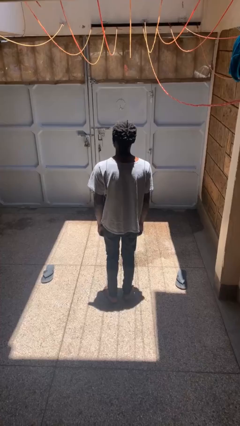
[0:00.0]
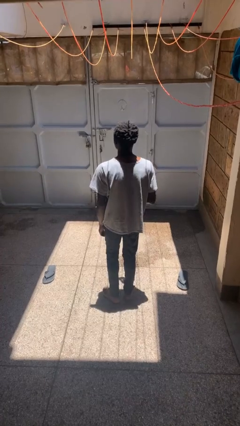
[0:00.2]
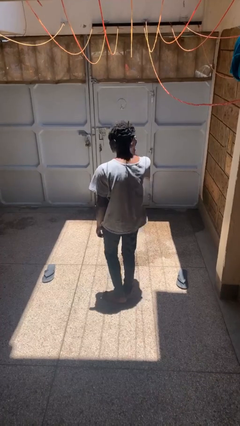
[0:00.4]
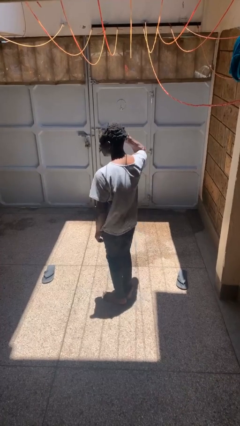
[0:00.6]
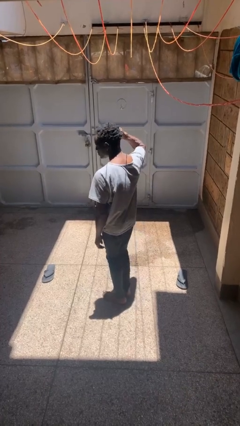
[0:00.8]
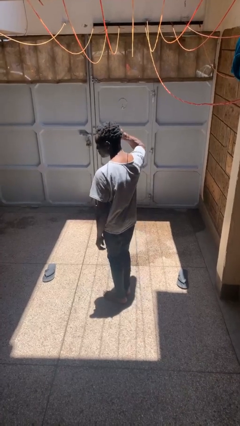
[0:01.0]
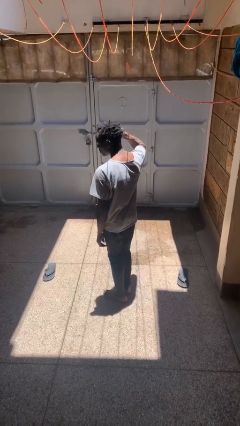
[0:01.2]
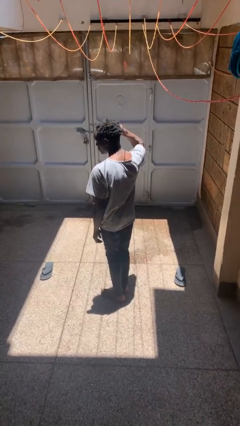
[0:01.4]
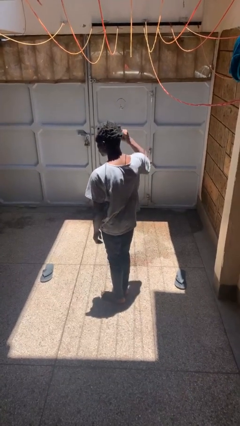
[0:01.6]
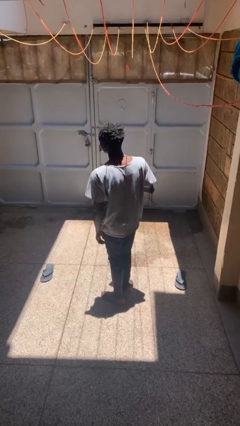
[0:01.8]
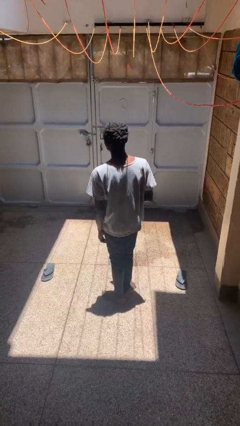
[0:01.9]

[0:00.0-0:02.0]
person touches earlobe

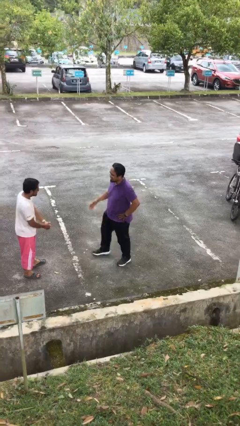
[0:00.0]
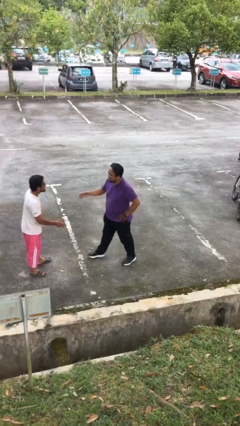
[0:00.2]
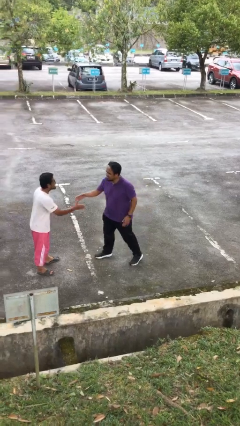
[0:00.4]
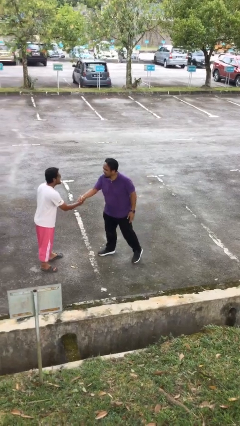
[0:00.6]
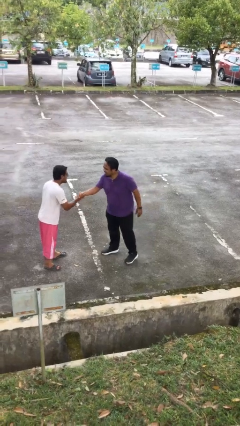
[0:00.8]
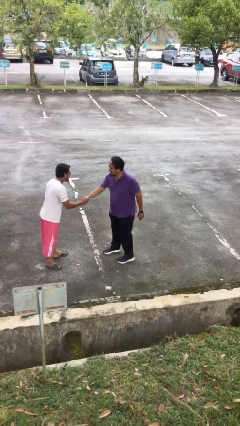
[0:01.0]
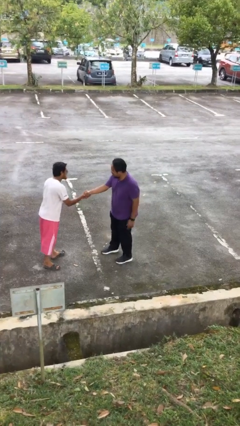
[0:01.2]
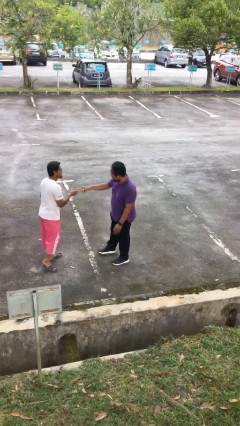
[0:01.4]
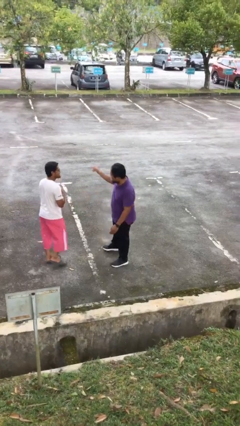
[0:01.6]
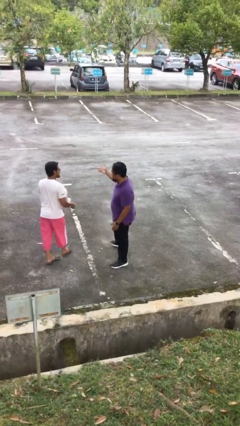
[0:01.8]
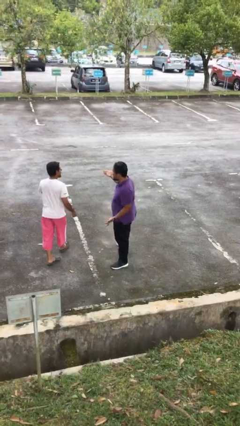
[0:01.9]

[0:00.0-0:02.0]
person shakes hand

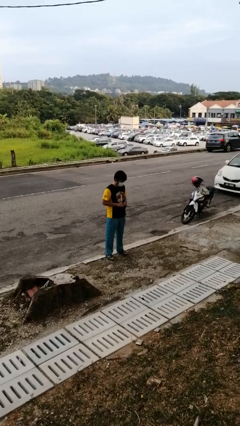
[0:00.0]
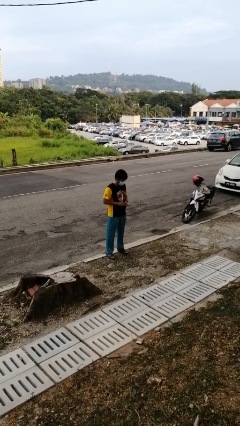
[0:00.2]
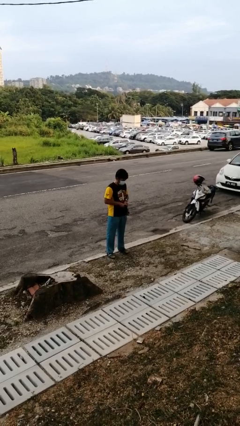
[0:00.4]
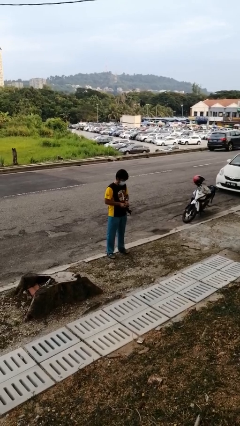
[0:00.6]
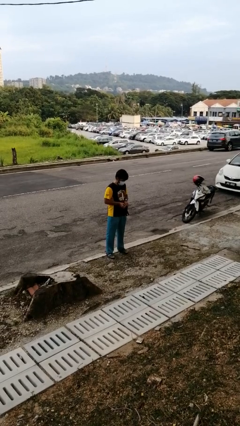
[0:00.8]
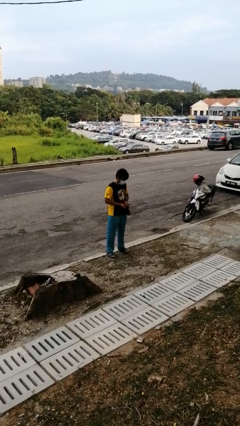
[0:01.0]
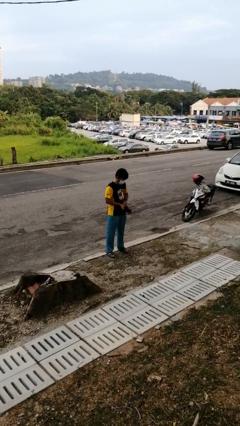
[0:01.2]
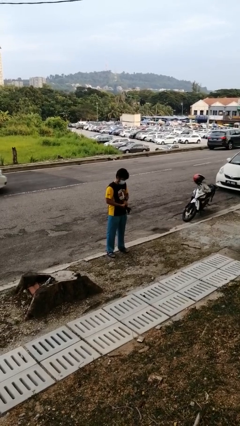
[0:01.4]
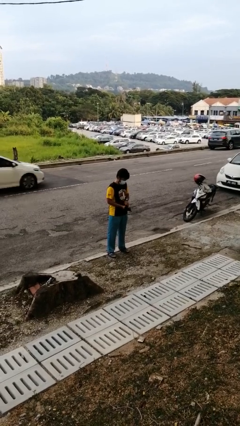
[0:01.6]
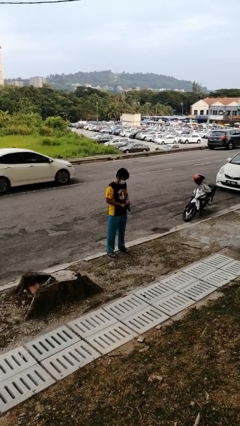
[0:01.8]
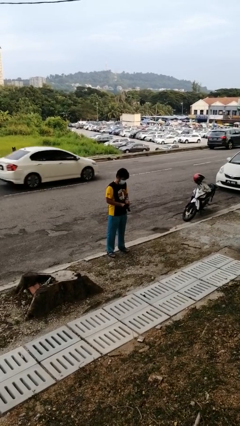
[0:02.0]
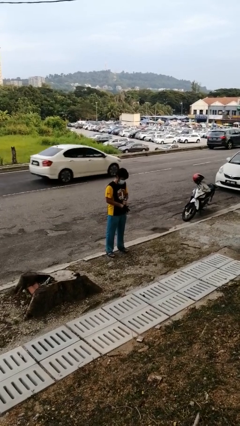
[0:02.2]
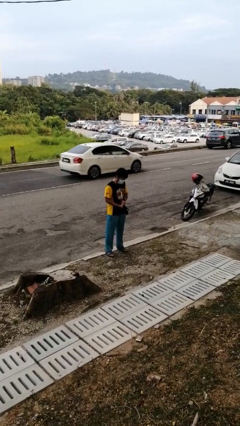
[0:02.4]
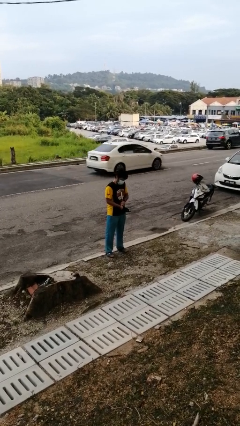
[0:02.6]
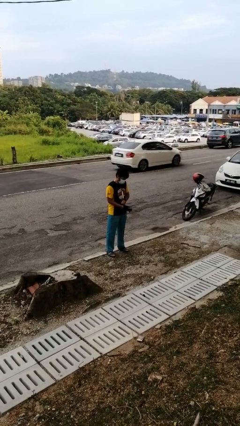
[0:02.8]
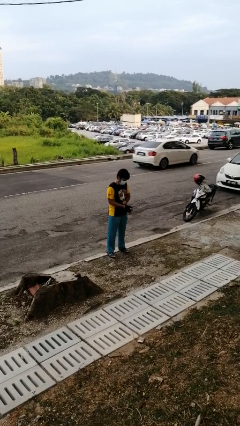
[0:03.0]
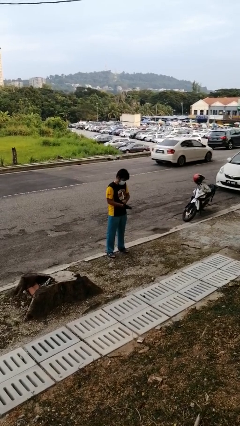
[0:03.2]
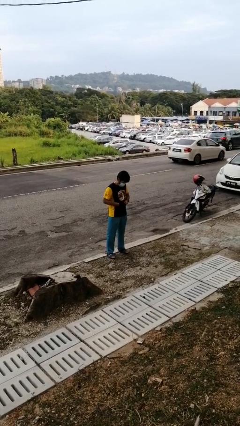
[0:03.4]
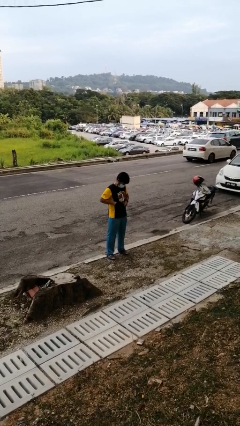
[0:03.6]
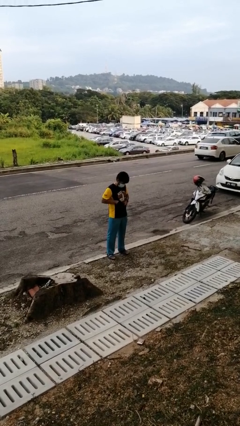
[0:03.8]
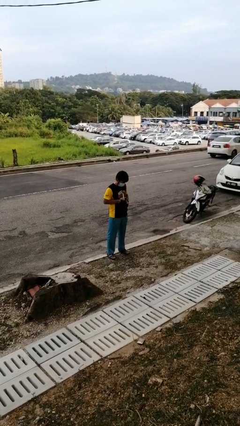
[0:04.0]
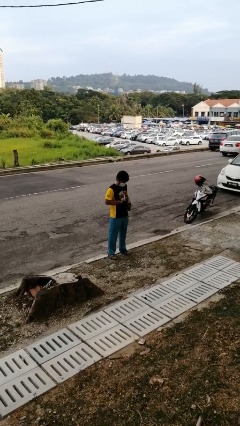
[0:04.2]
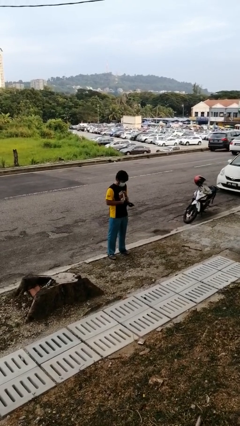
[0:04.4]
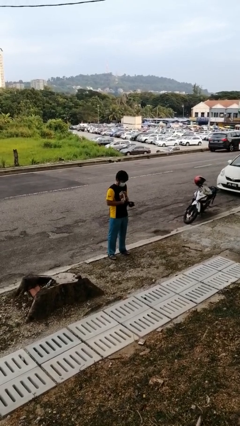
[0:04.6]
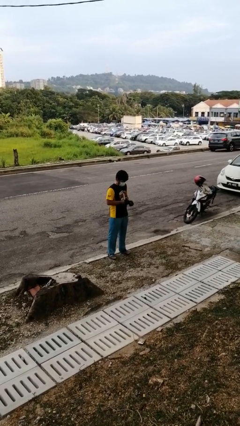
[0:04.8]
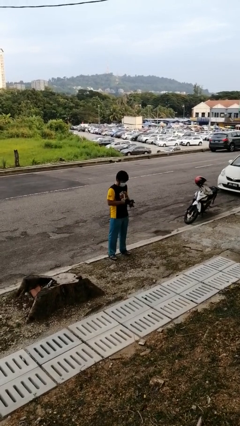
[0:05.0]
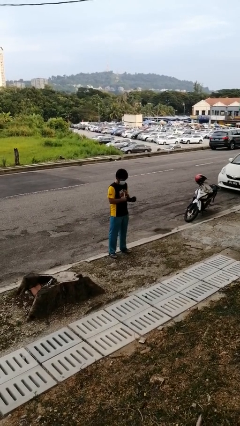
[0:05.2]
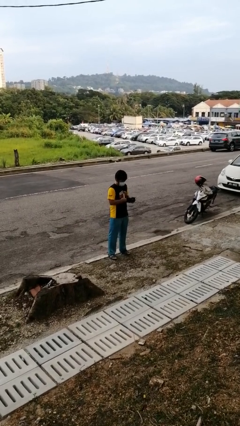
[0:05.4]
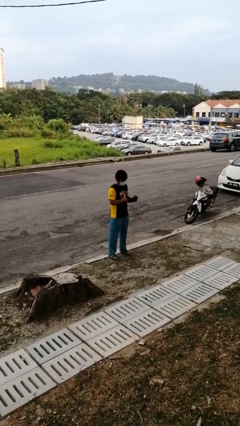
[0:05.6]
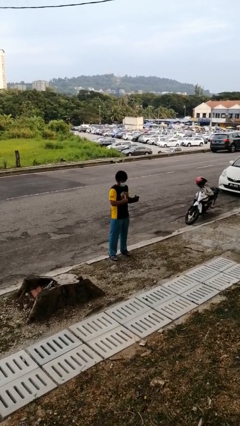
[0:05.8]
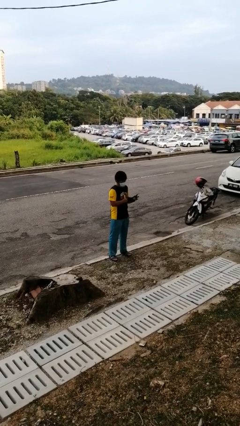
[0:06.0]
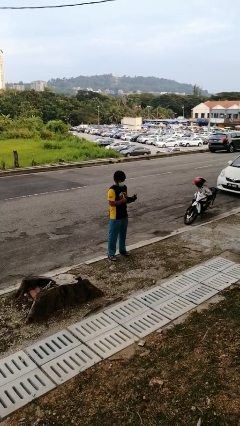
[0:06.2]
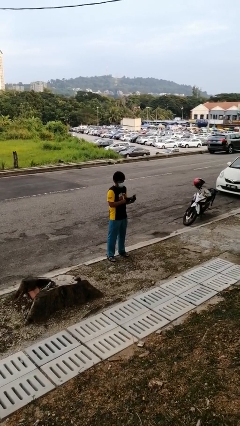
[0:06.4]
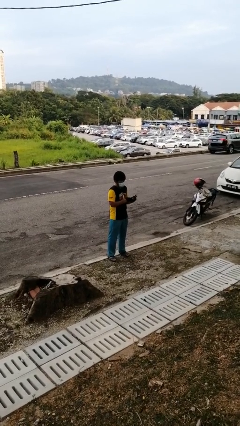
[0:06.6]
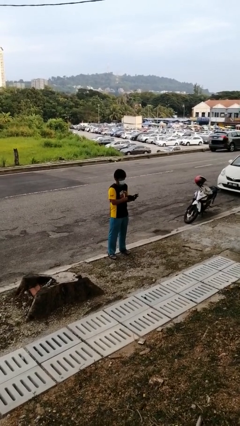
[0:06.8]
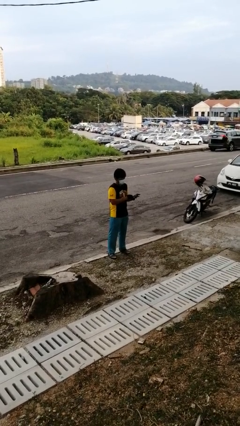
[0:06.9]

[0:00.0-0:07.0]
person puts on gloves

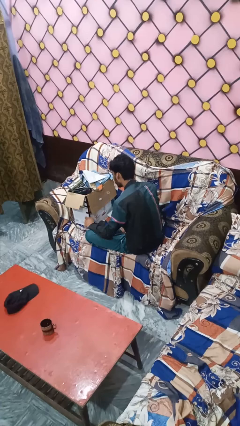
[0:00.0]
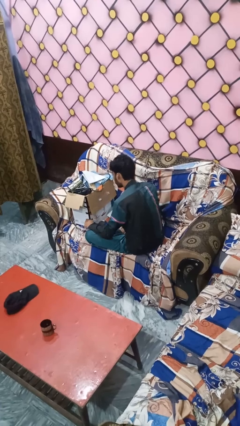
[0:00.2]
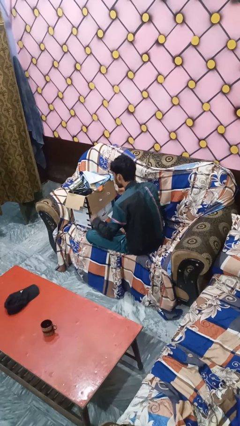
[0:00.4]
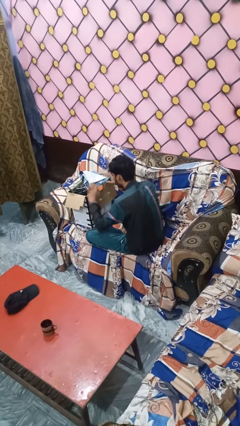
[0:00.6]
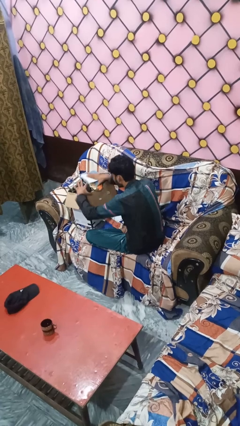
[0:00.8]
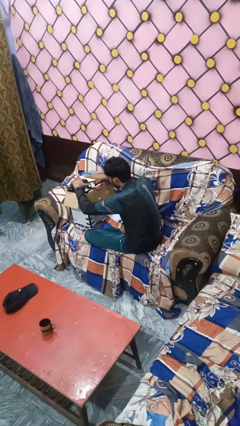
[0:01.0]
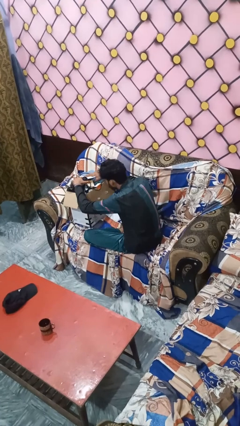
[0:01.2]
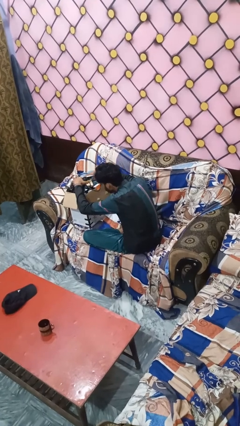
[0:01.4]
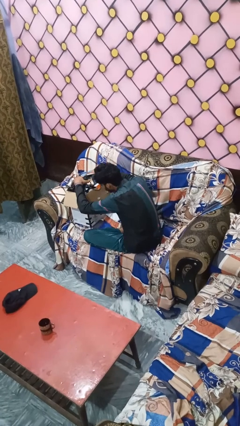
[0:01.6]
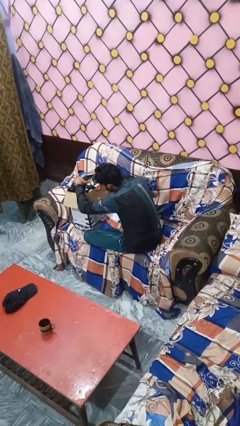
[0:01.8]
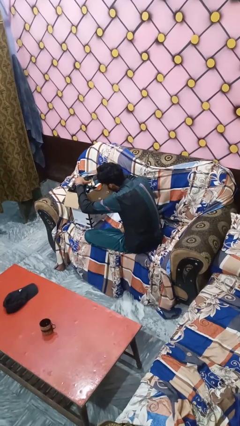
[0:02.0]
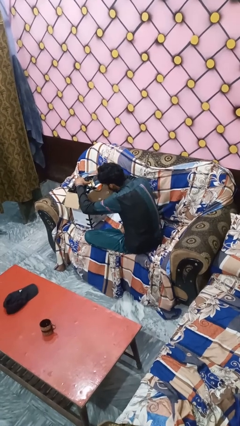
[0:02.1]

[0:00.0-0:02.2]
person searches in box

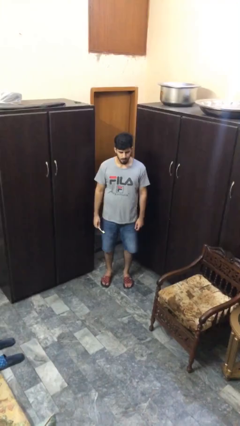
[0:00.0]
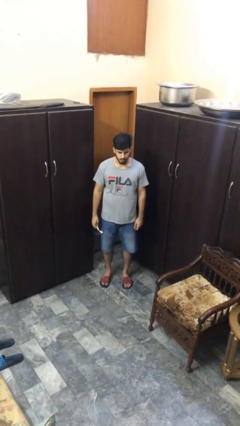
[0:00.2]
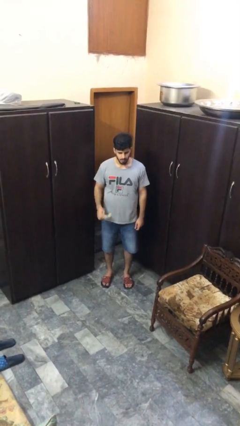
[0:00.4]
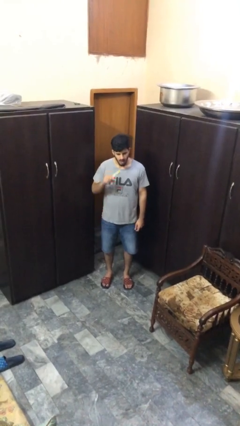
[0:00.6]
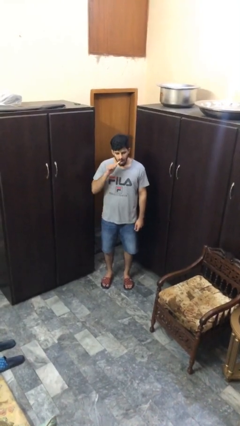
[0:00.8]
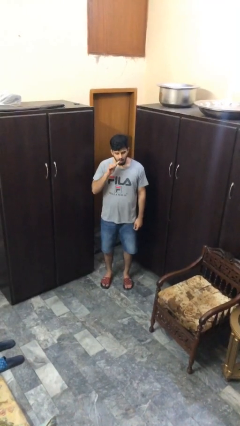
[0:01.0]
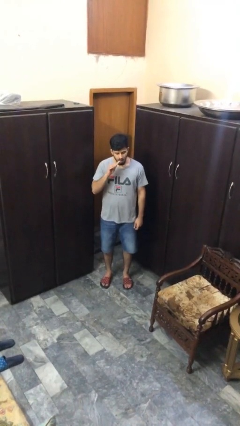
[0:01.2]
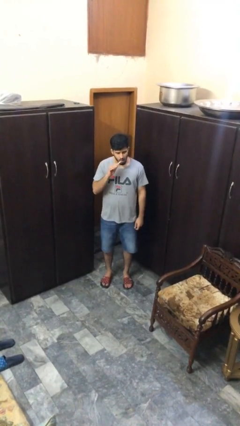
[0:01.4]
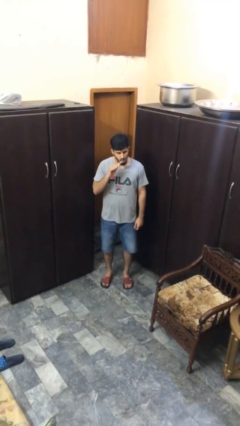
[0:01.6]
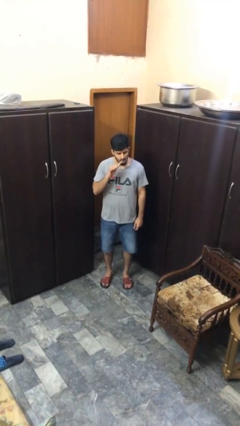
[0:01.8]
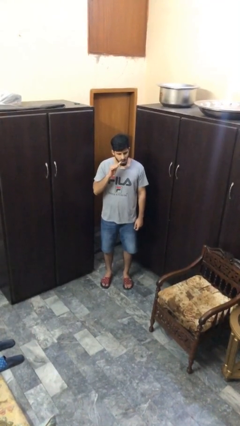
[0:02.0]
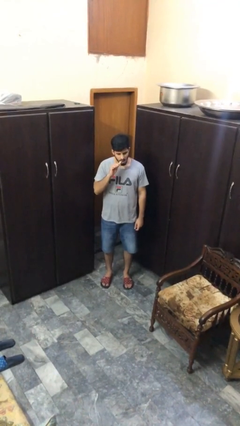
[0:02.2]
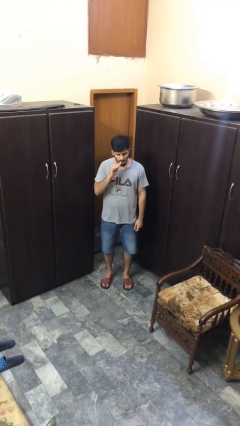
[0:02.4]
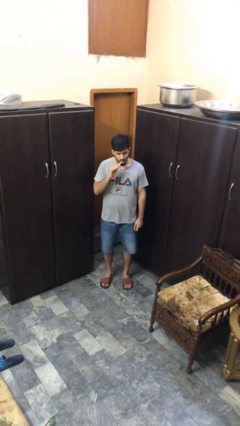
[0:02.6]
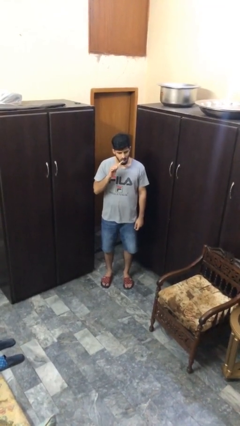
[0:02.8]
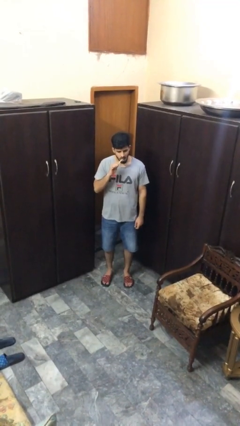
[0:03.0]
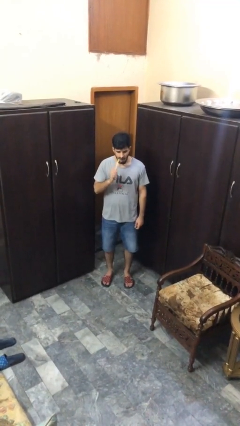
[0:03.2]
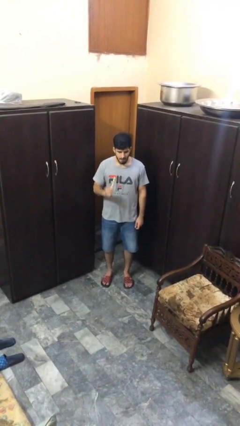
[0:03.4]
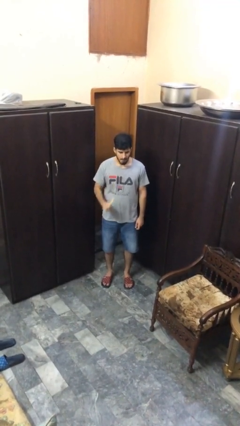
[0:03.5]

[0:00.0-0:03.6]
person brushes teeth

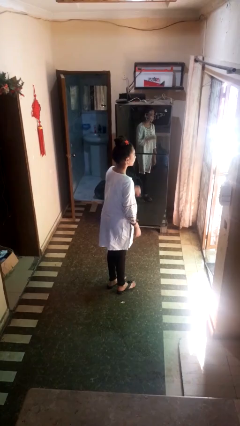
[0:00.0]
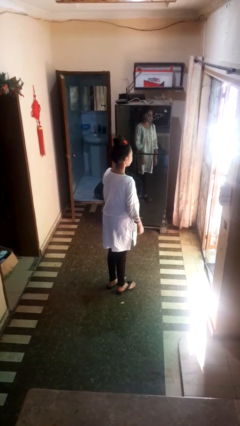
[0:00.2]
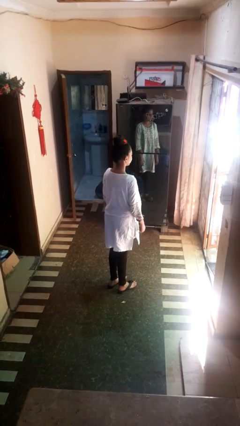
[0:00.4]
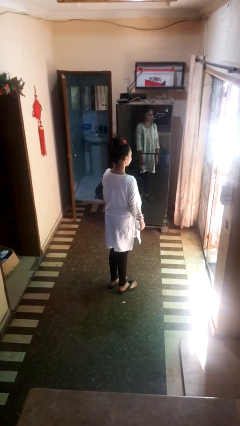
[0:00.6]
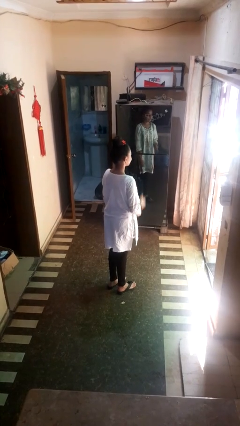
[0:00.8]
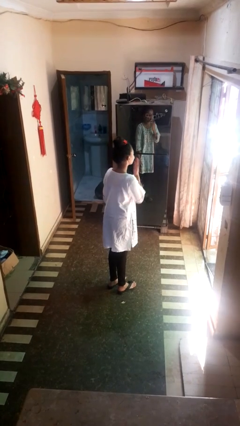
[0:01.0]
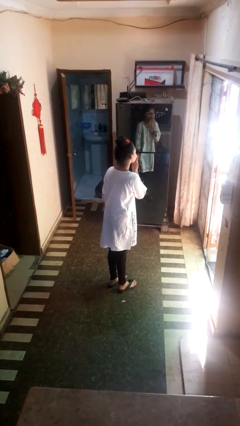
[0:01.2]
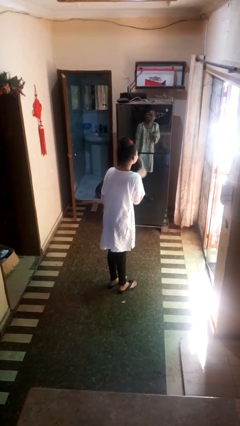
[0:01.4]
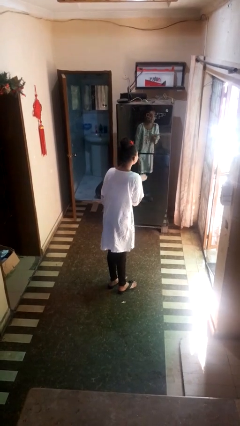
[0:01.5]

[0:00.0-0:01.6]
person gestures blow kiss
